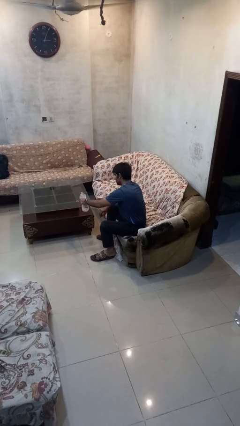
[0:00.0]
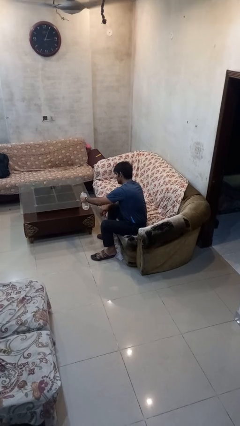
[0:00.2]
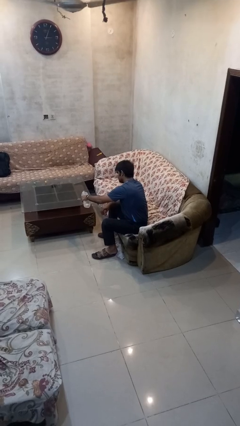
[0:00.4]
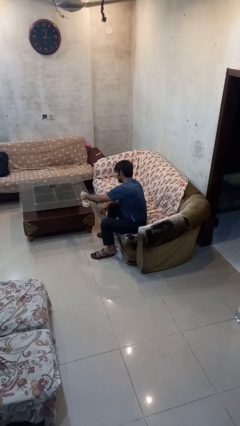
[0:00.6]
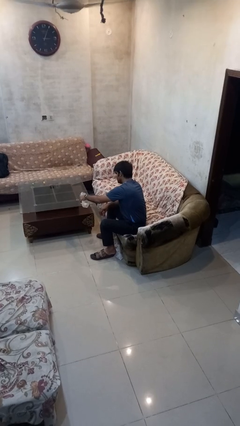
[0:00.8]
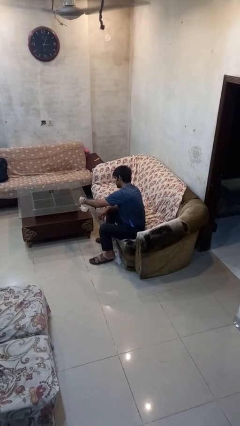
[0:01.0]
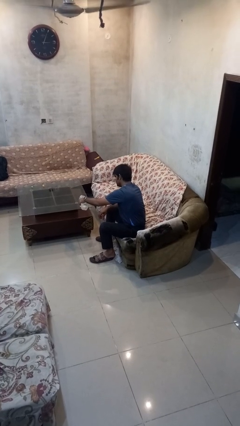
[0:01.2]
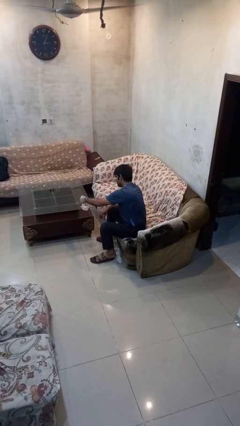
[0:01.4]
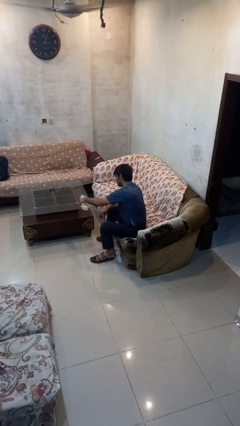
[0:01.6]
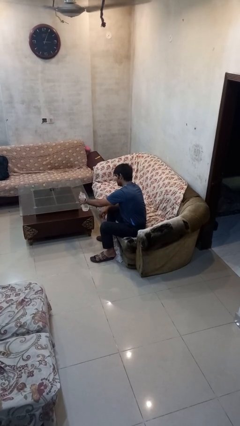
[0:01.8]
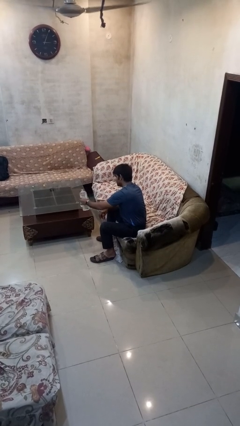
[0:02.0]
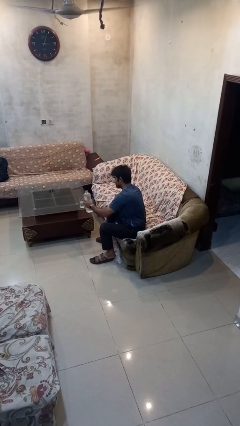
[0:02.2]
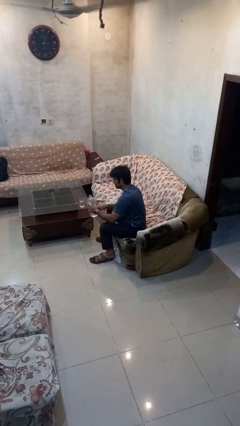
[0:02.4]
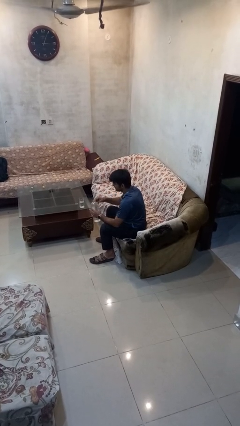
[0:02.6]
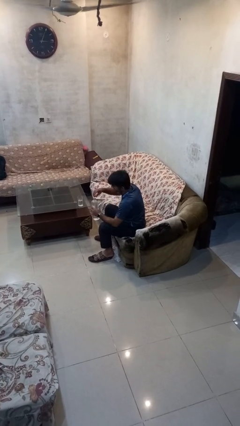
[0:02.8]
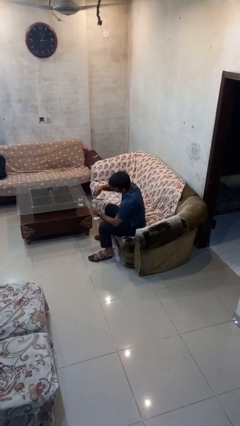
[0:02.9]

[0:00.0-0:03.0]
person pours liquid into cup

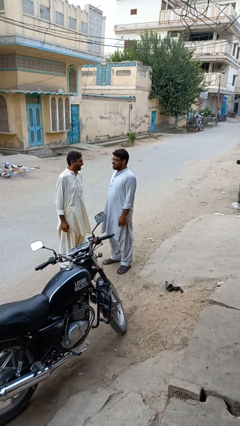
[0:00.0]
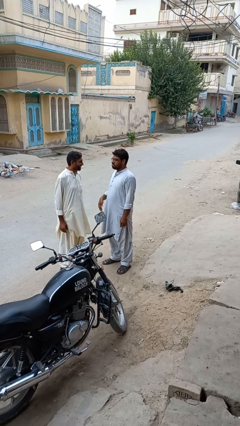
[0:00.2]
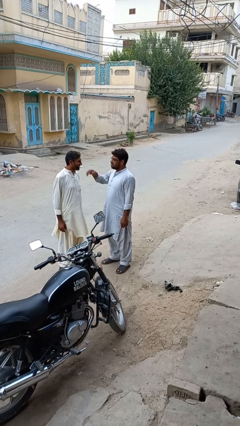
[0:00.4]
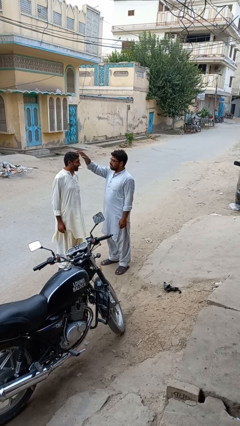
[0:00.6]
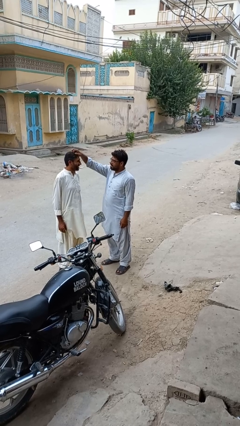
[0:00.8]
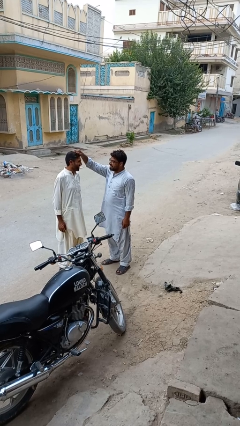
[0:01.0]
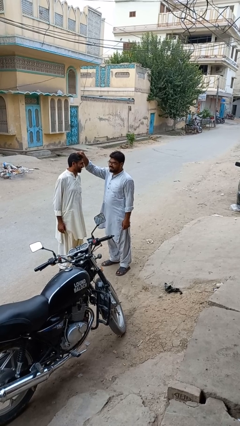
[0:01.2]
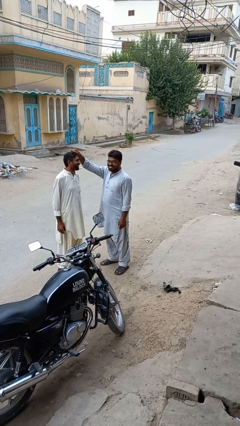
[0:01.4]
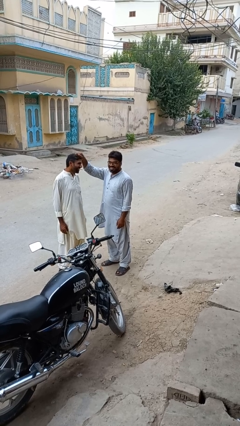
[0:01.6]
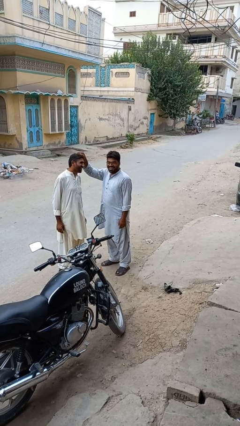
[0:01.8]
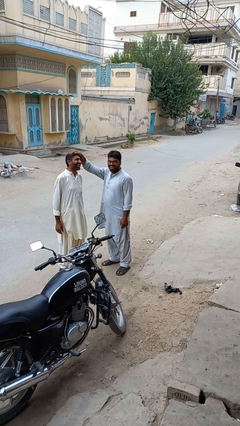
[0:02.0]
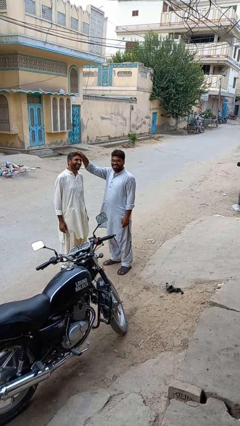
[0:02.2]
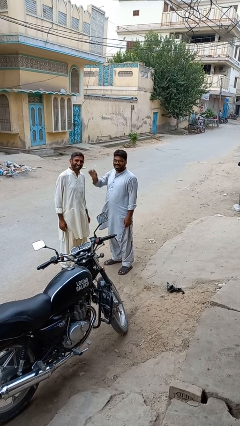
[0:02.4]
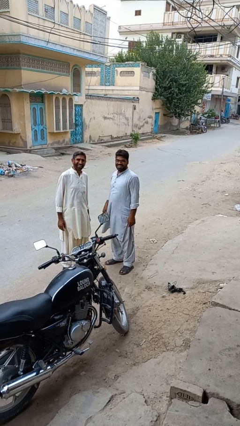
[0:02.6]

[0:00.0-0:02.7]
person grabs person by hair

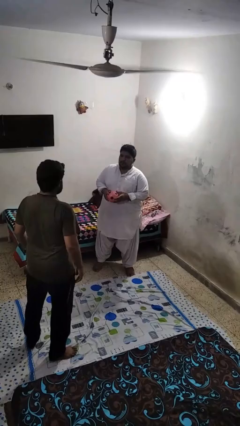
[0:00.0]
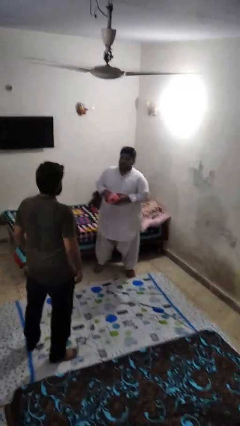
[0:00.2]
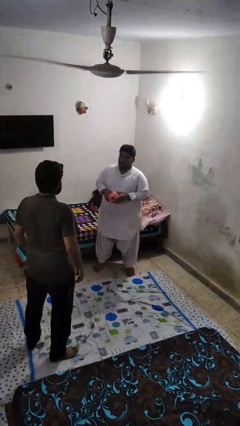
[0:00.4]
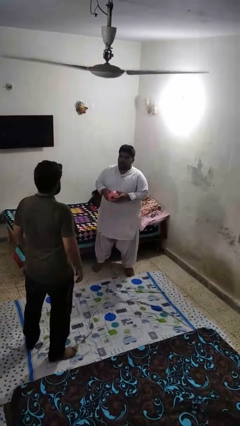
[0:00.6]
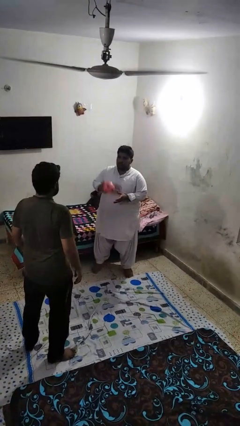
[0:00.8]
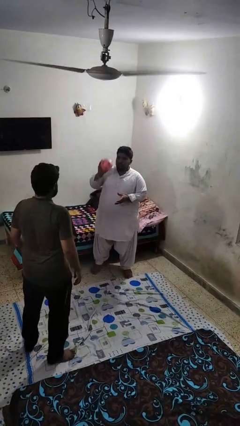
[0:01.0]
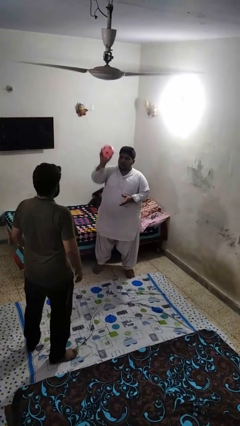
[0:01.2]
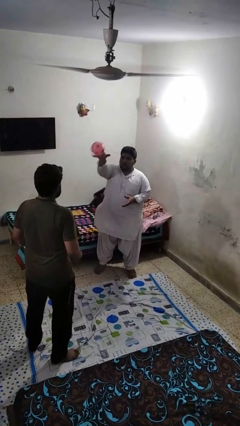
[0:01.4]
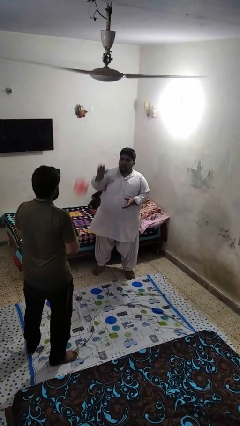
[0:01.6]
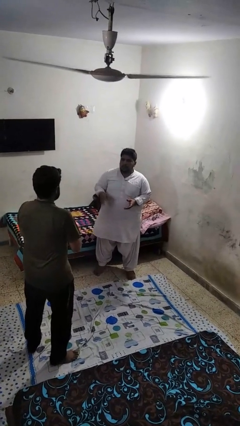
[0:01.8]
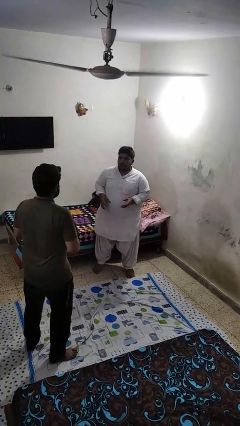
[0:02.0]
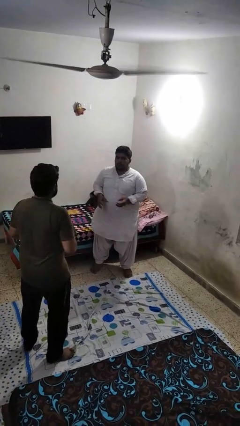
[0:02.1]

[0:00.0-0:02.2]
person throws object to person

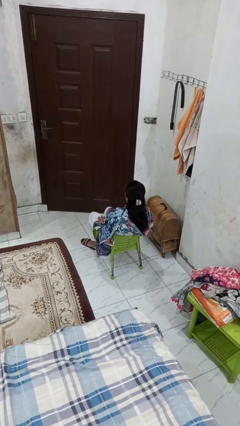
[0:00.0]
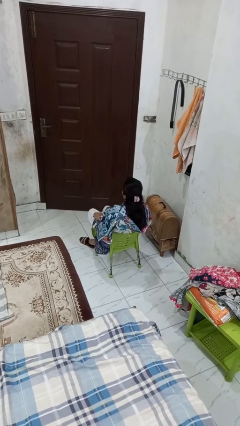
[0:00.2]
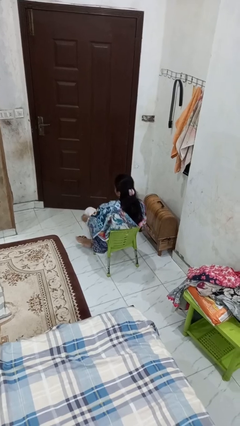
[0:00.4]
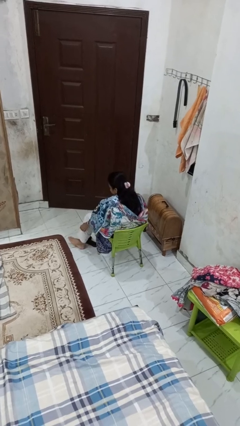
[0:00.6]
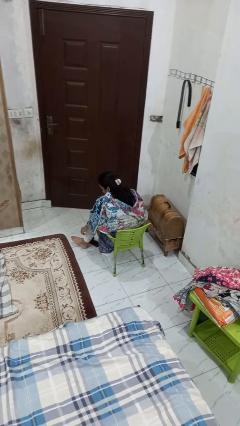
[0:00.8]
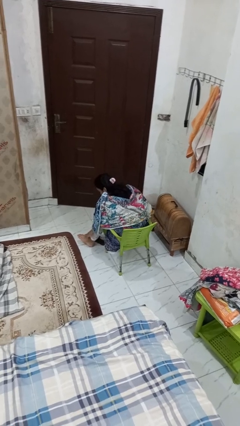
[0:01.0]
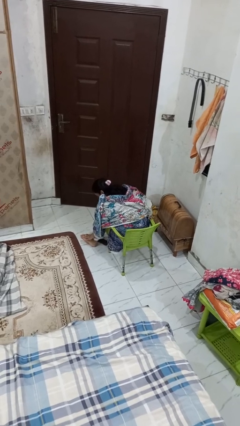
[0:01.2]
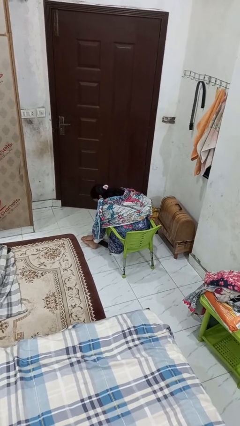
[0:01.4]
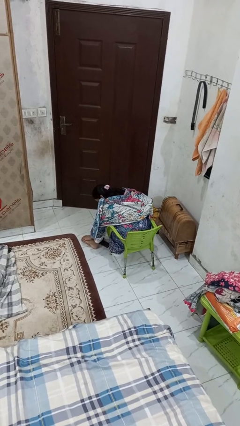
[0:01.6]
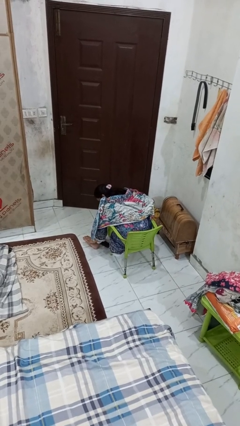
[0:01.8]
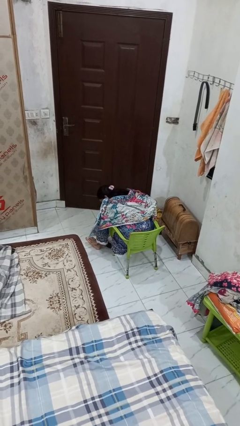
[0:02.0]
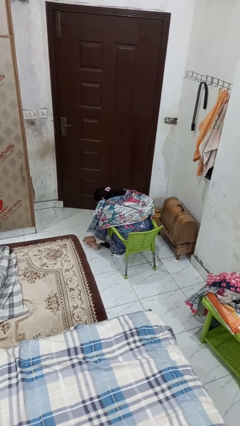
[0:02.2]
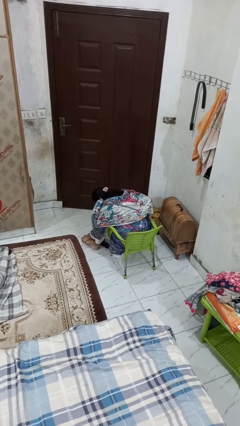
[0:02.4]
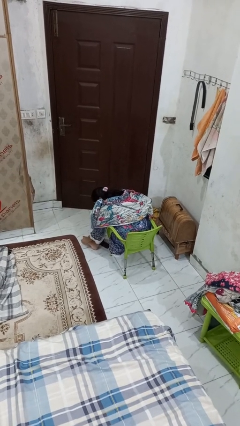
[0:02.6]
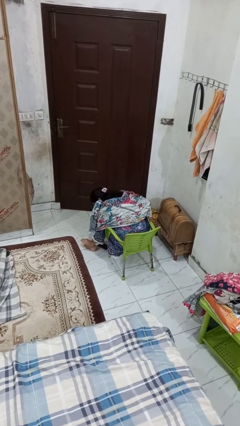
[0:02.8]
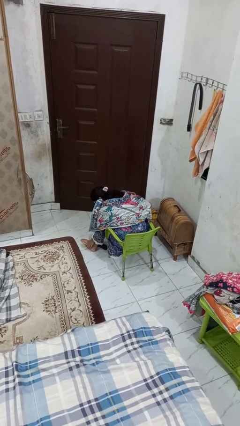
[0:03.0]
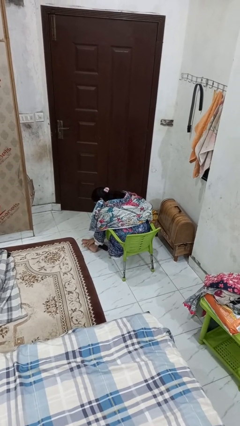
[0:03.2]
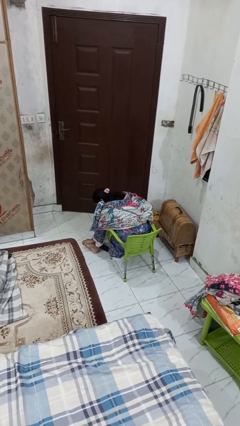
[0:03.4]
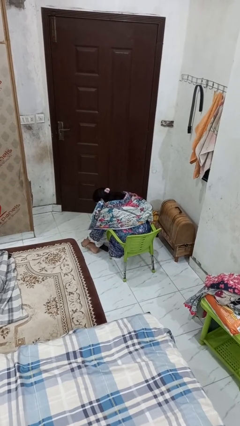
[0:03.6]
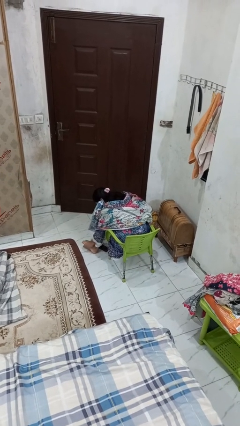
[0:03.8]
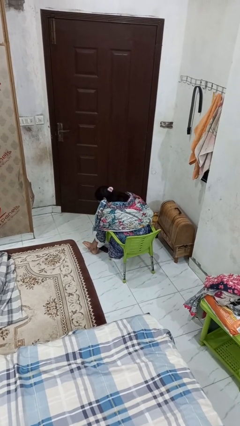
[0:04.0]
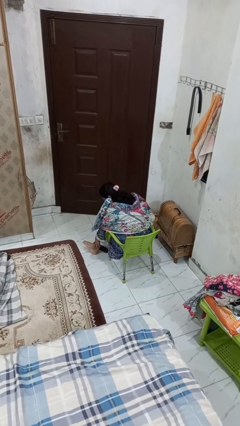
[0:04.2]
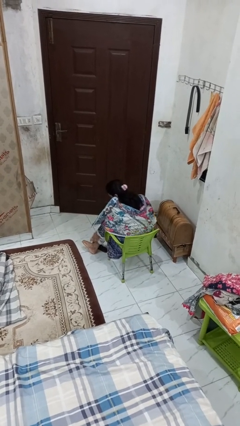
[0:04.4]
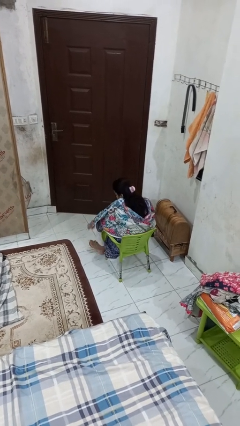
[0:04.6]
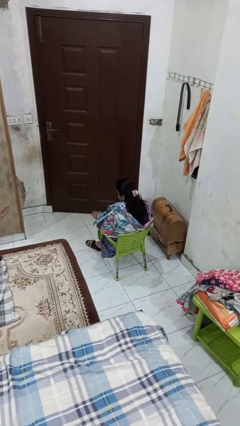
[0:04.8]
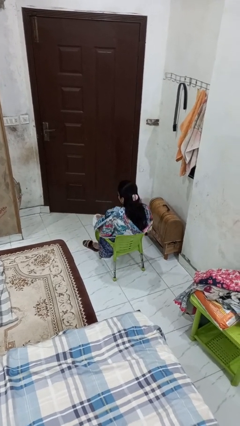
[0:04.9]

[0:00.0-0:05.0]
person rubs foot

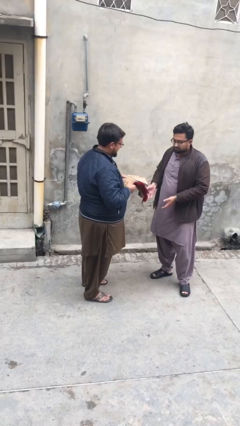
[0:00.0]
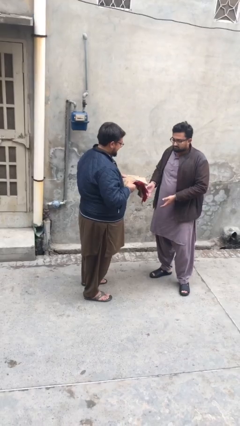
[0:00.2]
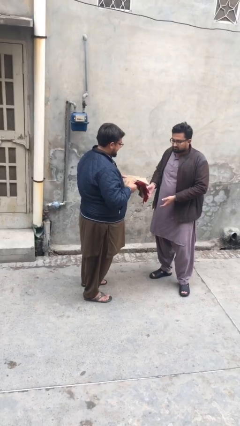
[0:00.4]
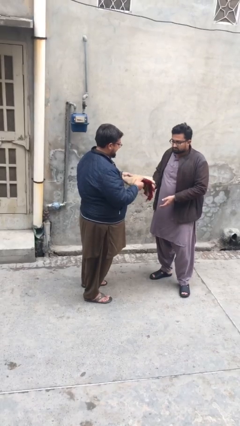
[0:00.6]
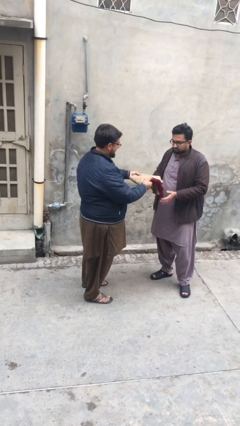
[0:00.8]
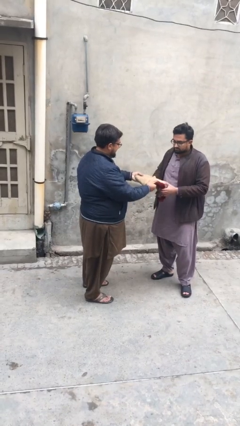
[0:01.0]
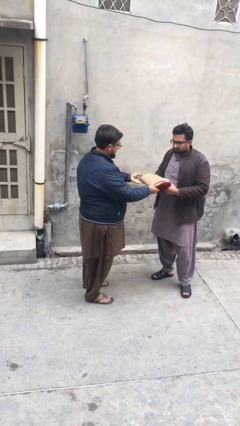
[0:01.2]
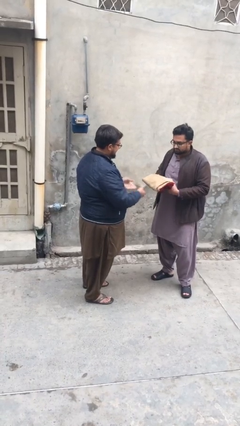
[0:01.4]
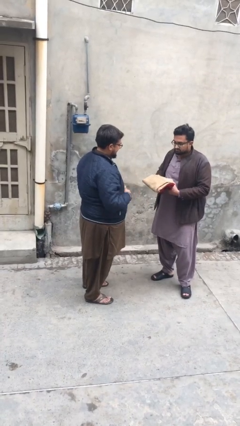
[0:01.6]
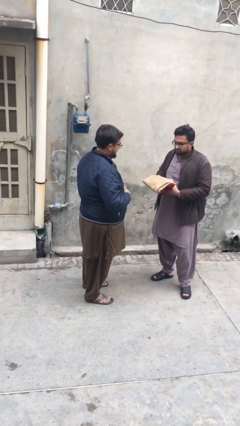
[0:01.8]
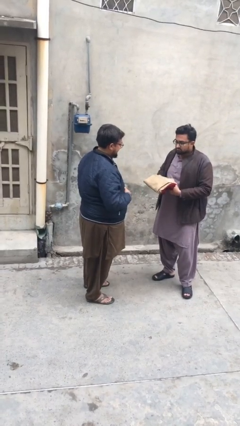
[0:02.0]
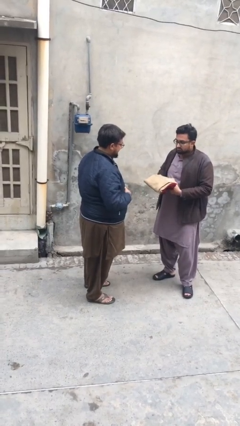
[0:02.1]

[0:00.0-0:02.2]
person transfers object to person

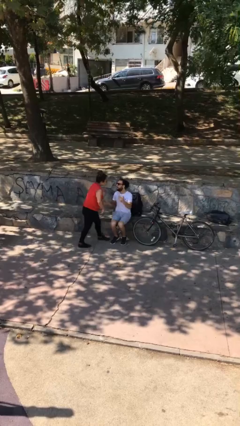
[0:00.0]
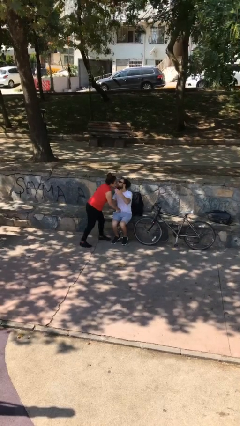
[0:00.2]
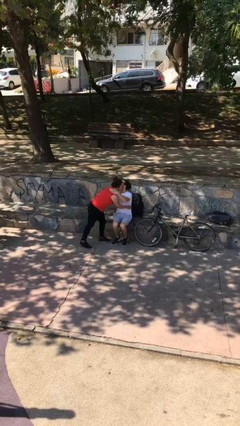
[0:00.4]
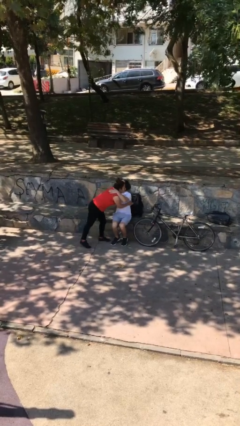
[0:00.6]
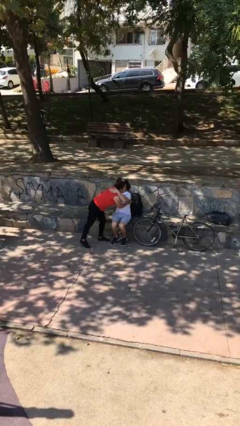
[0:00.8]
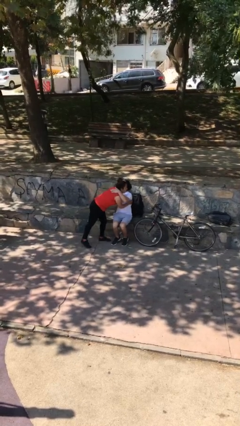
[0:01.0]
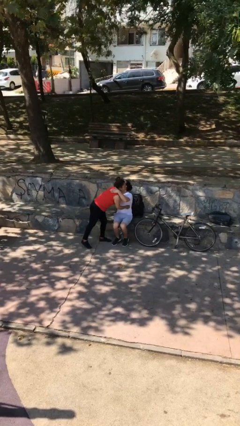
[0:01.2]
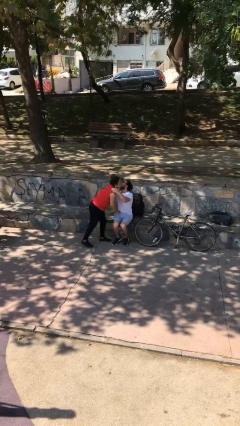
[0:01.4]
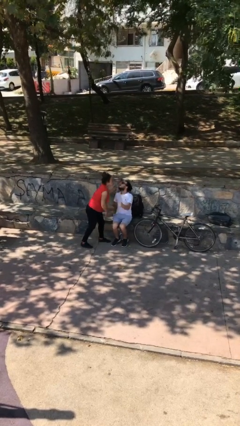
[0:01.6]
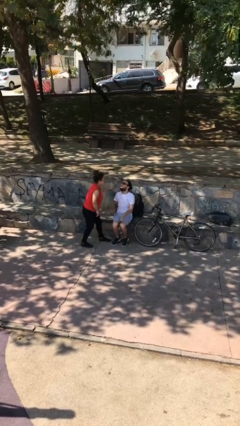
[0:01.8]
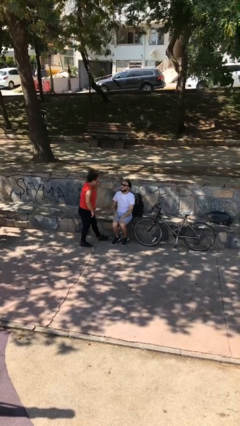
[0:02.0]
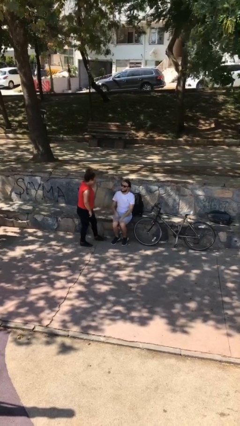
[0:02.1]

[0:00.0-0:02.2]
person embraces person

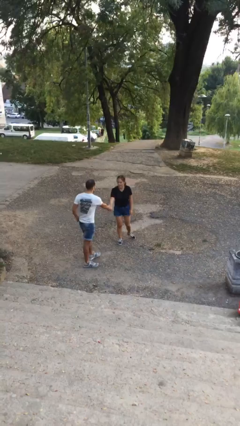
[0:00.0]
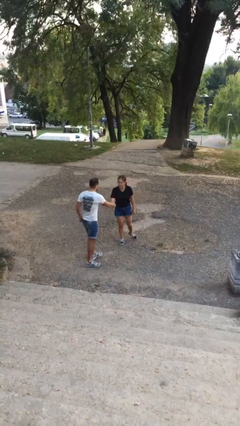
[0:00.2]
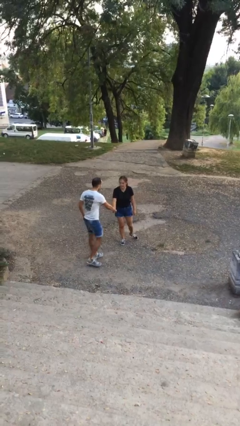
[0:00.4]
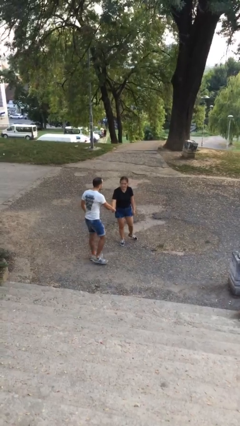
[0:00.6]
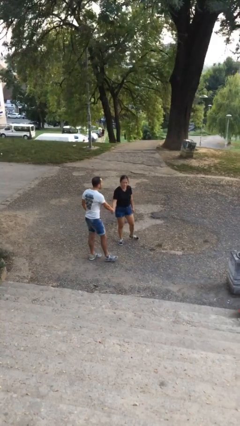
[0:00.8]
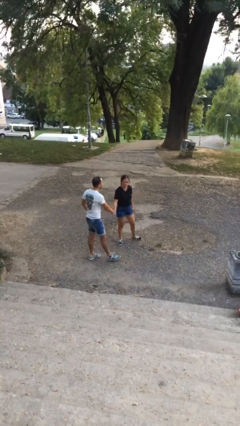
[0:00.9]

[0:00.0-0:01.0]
person shakes hand
